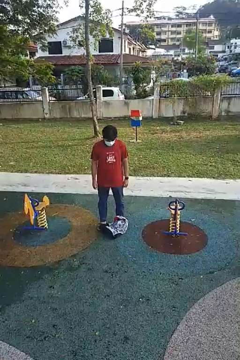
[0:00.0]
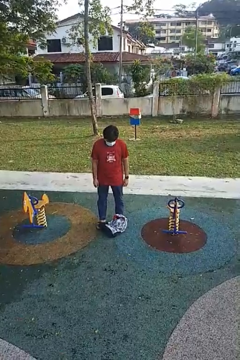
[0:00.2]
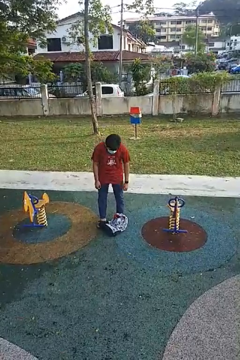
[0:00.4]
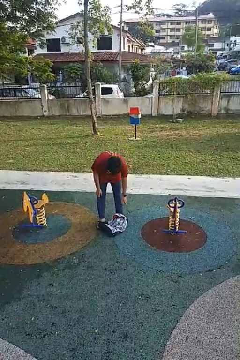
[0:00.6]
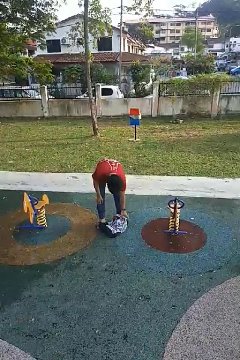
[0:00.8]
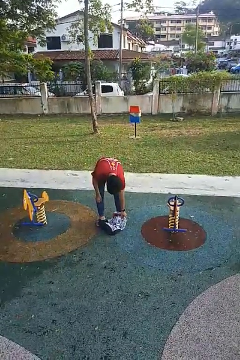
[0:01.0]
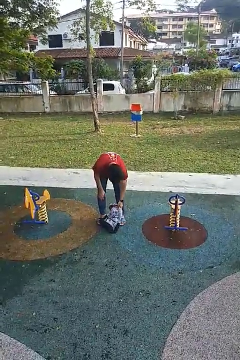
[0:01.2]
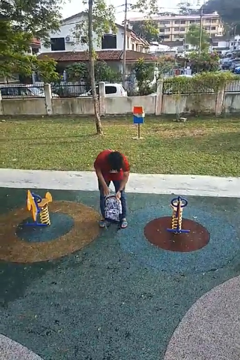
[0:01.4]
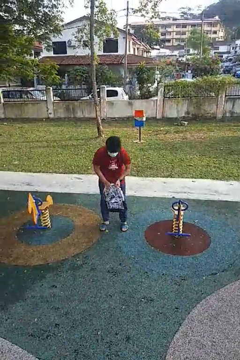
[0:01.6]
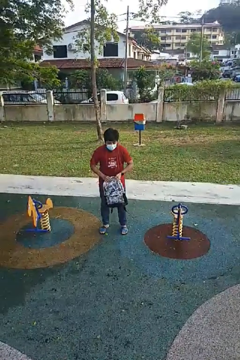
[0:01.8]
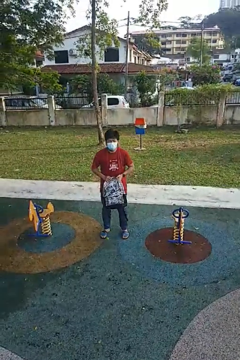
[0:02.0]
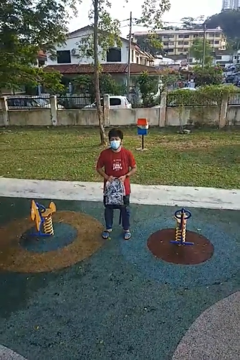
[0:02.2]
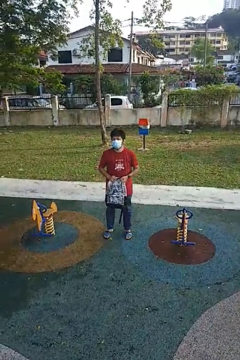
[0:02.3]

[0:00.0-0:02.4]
person picks up object from floor

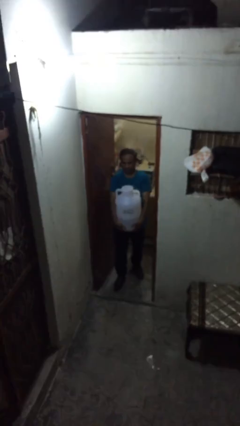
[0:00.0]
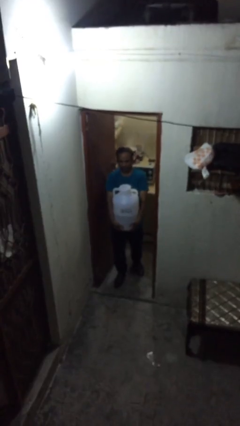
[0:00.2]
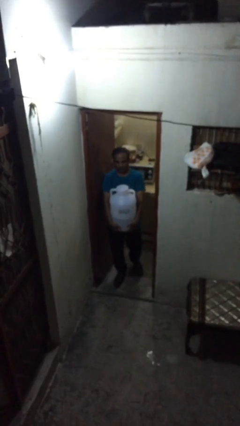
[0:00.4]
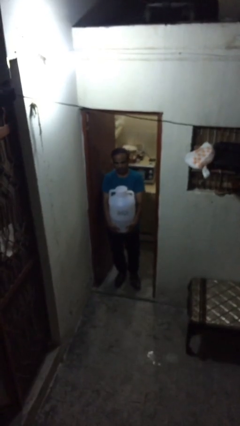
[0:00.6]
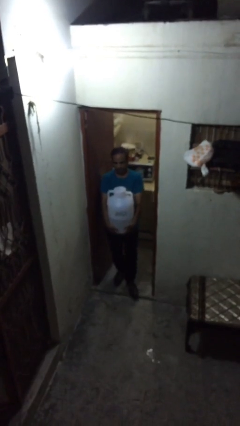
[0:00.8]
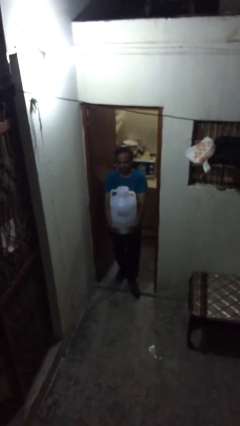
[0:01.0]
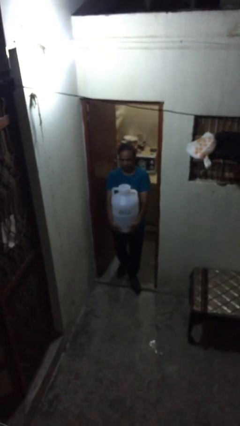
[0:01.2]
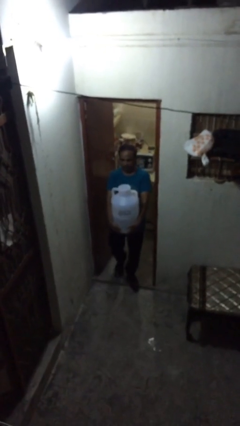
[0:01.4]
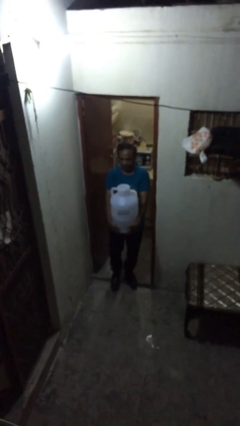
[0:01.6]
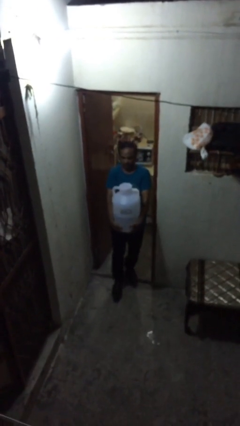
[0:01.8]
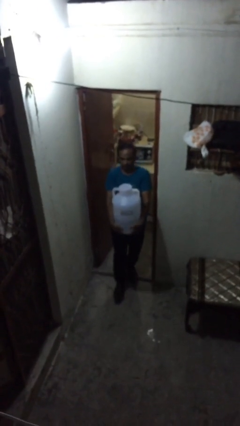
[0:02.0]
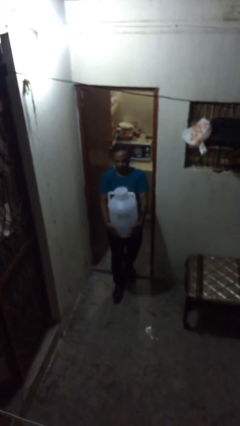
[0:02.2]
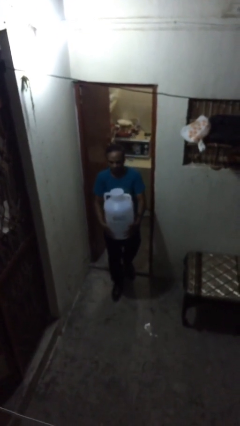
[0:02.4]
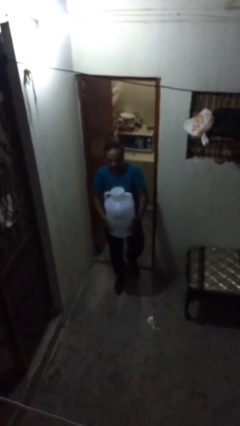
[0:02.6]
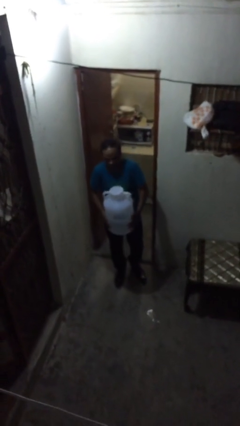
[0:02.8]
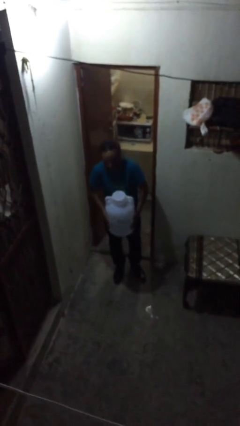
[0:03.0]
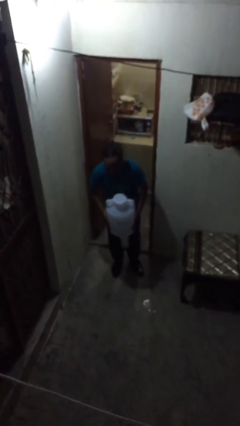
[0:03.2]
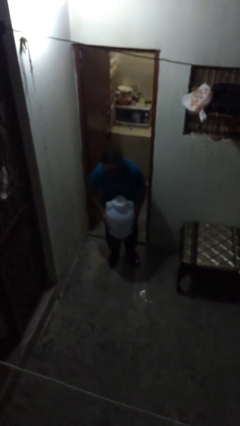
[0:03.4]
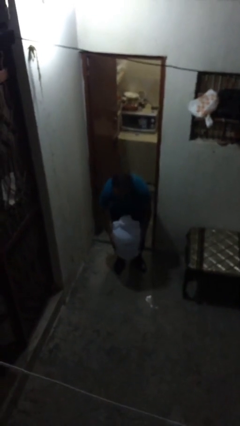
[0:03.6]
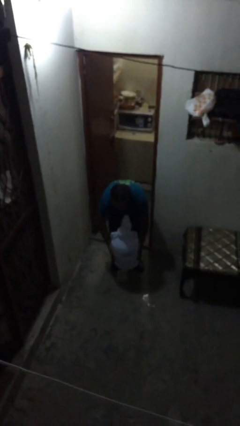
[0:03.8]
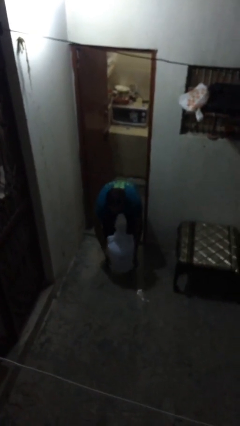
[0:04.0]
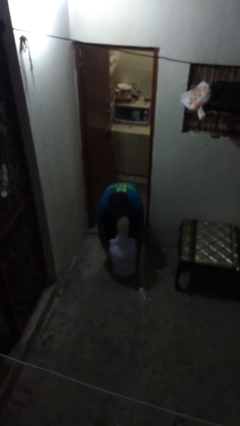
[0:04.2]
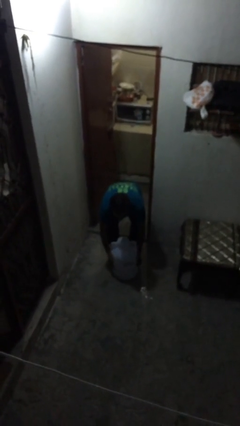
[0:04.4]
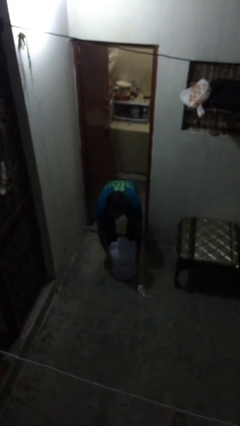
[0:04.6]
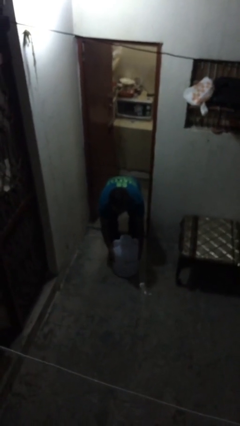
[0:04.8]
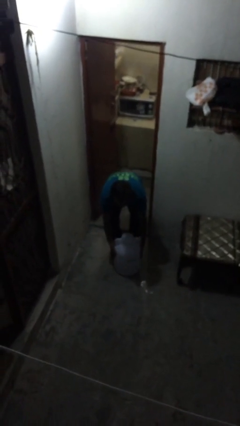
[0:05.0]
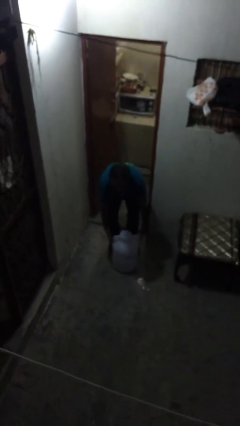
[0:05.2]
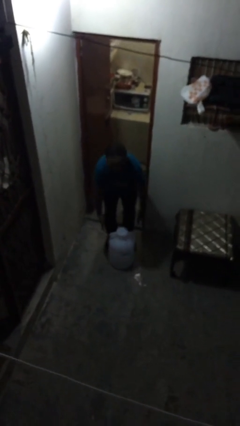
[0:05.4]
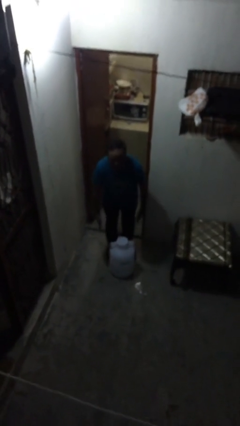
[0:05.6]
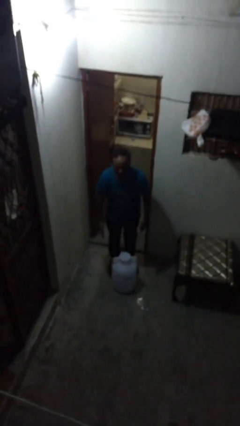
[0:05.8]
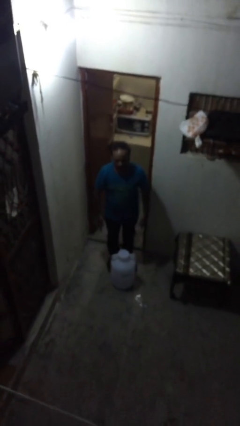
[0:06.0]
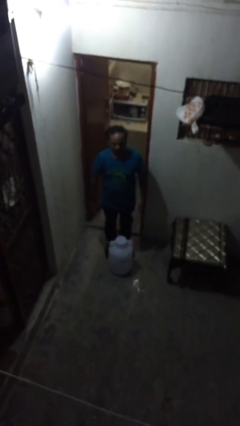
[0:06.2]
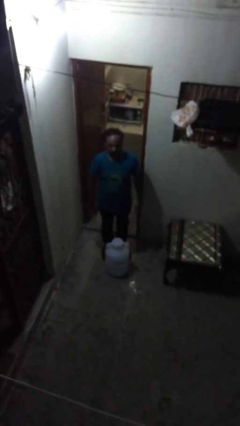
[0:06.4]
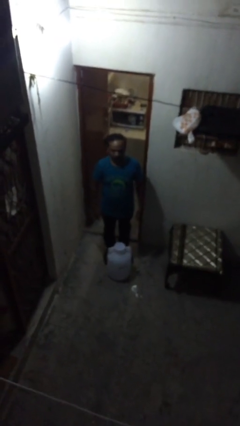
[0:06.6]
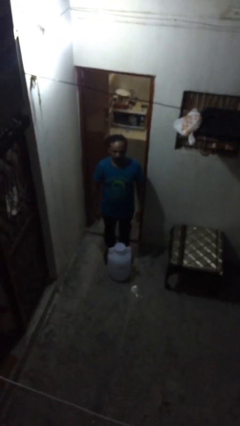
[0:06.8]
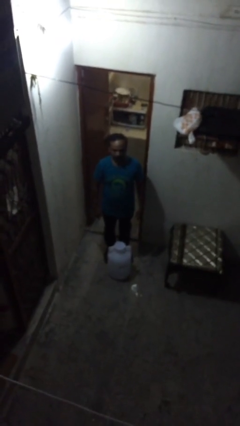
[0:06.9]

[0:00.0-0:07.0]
person puts down object on floor

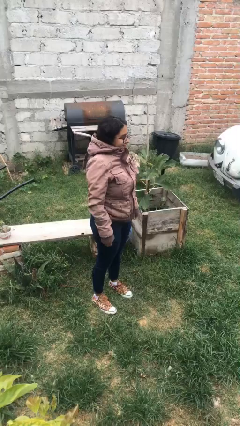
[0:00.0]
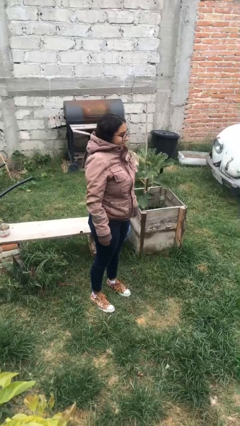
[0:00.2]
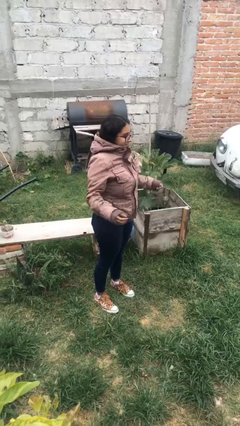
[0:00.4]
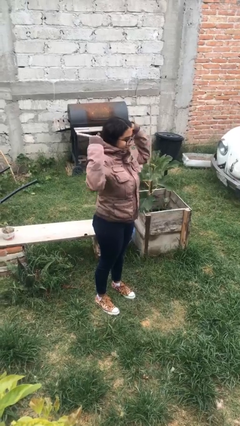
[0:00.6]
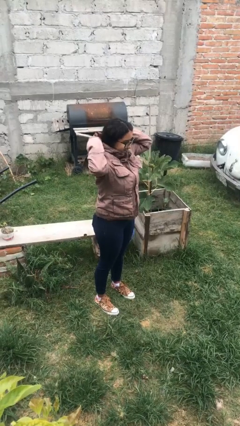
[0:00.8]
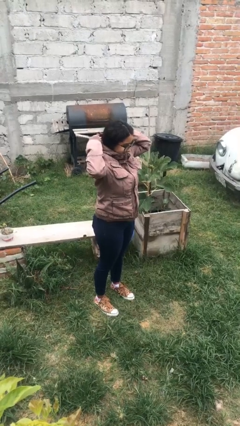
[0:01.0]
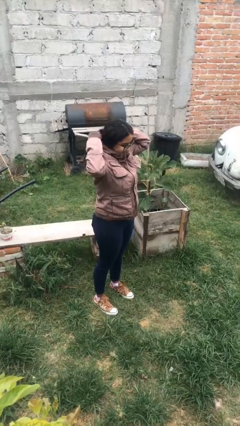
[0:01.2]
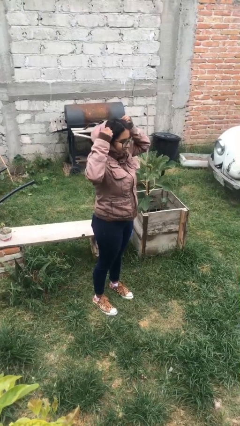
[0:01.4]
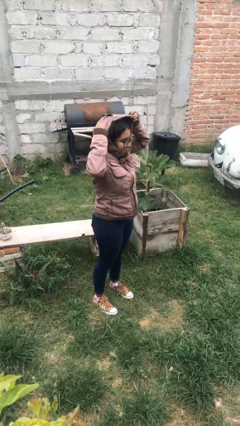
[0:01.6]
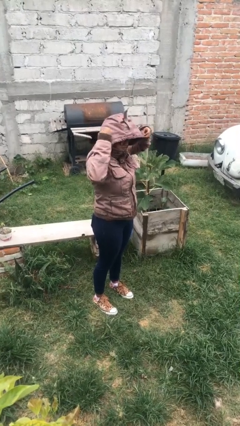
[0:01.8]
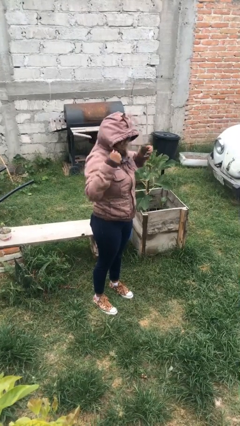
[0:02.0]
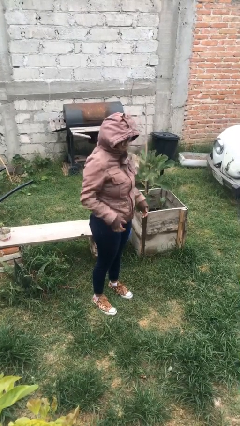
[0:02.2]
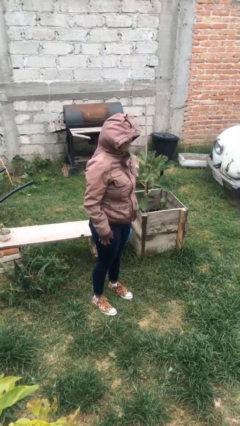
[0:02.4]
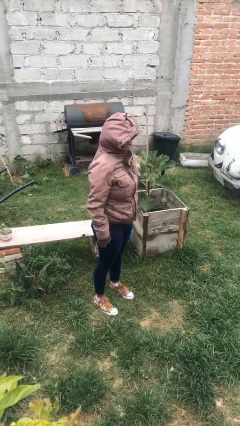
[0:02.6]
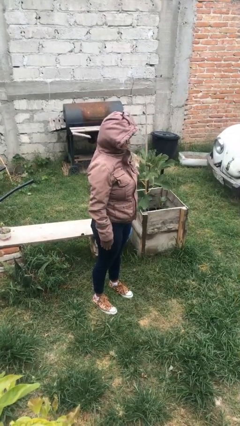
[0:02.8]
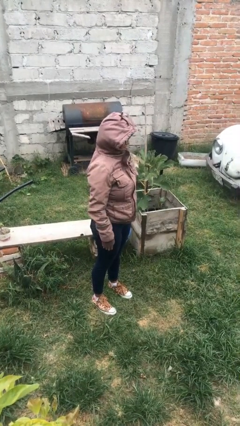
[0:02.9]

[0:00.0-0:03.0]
person puts on hoodie

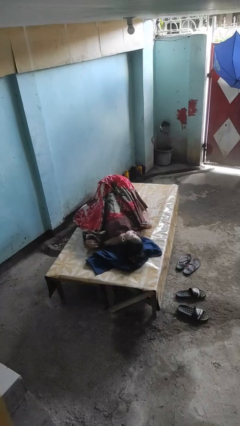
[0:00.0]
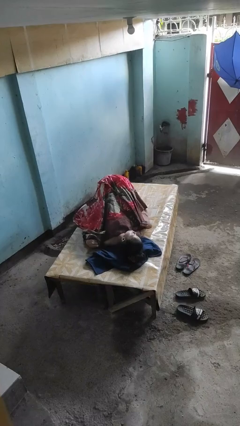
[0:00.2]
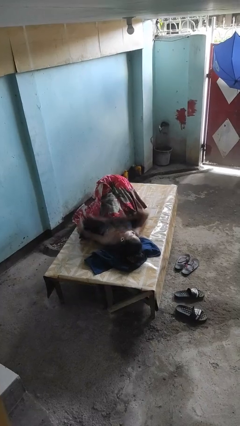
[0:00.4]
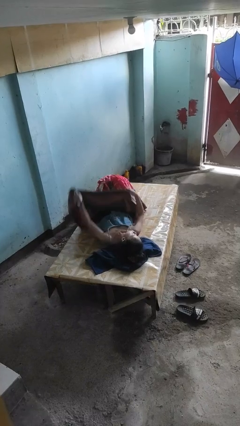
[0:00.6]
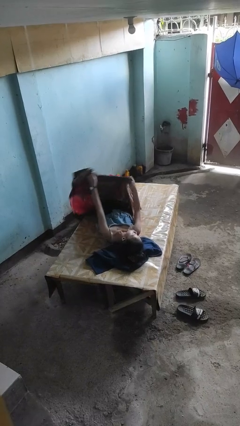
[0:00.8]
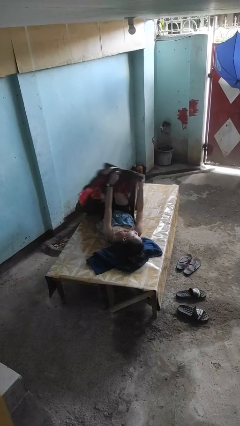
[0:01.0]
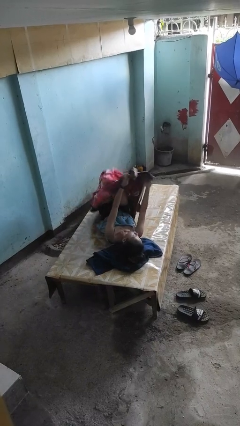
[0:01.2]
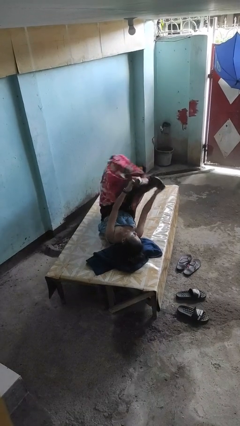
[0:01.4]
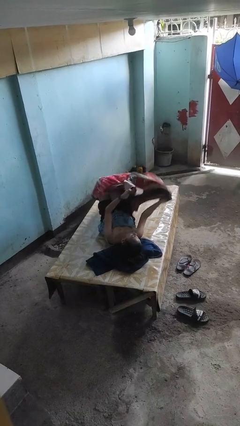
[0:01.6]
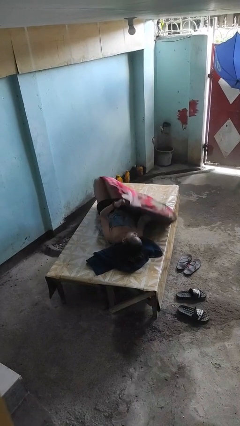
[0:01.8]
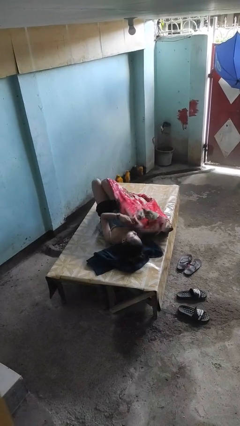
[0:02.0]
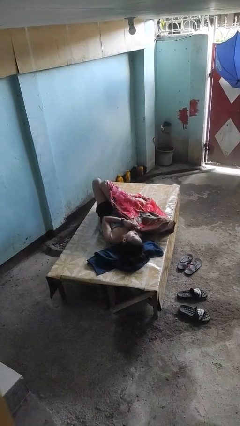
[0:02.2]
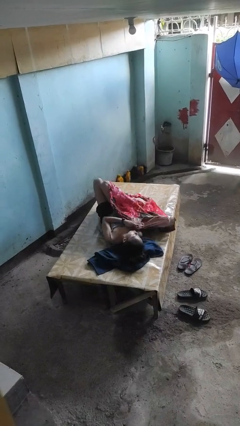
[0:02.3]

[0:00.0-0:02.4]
person uncovers with blanket

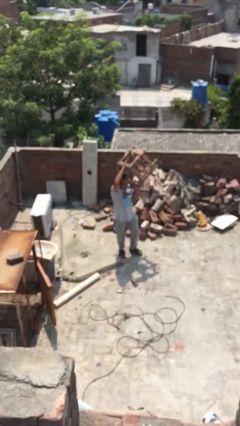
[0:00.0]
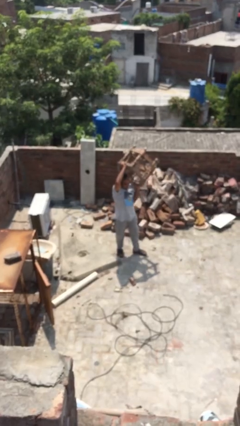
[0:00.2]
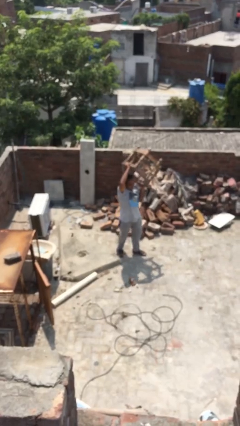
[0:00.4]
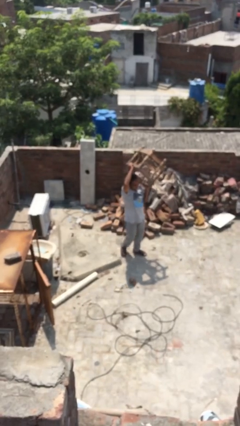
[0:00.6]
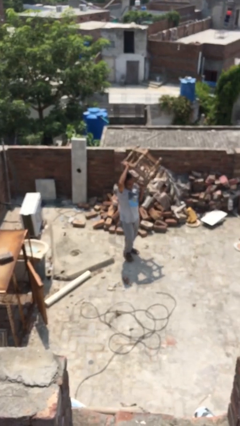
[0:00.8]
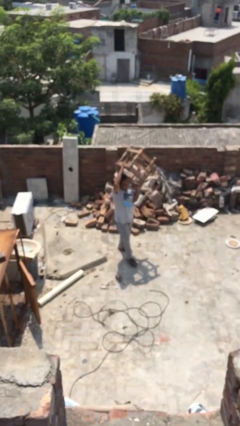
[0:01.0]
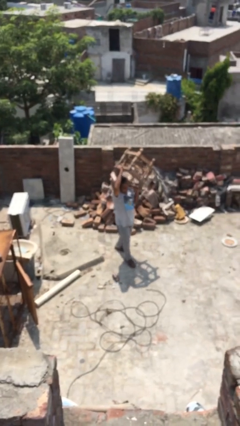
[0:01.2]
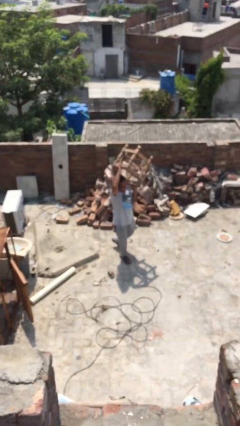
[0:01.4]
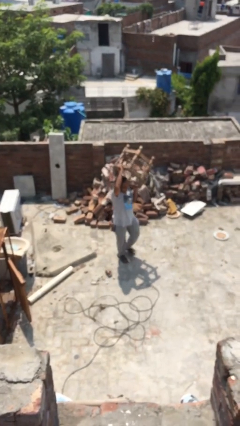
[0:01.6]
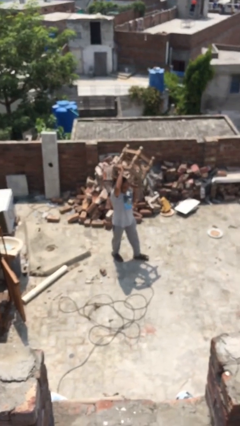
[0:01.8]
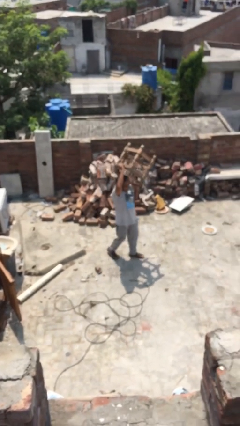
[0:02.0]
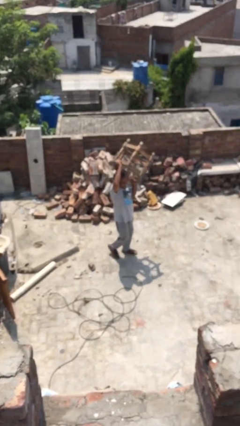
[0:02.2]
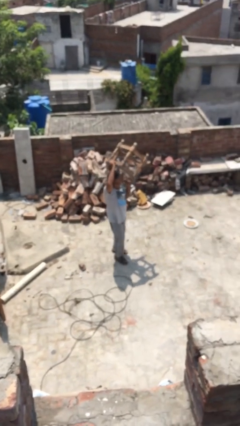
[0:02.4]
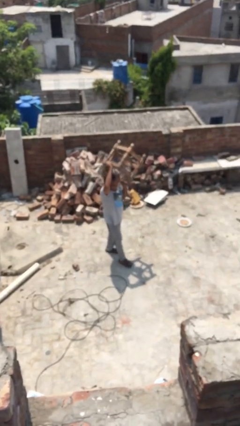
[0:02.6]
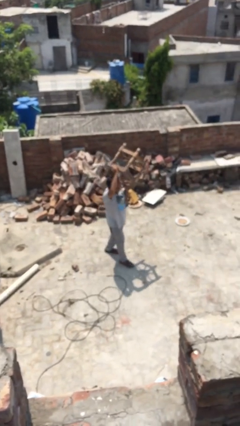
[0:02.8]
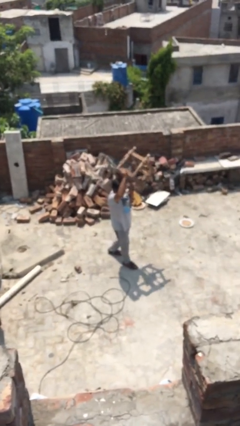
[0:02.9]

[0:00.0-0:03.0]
person carries heavy object

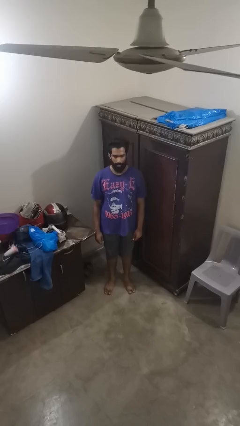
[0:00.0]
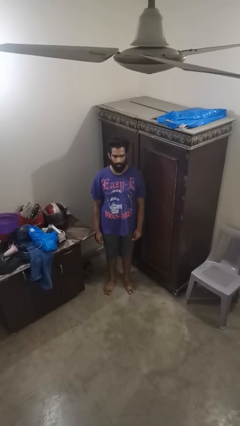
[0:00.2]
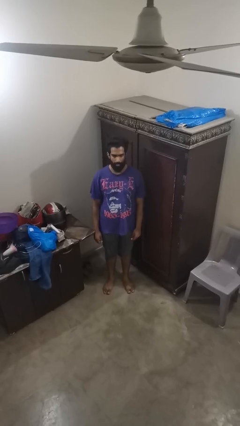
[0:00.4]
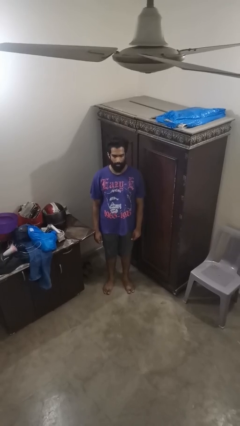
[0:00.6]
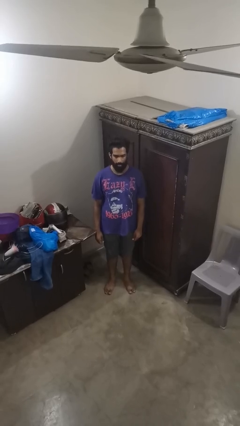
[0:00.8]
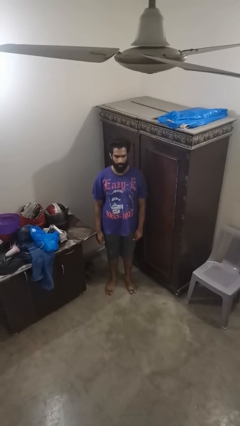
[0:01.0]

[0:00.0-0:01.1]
person sticks out tongue
